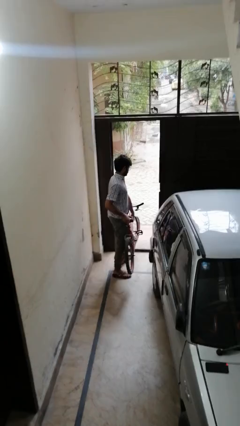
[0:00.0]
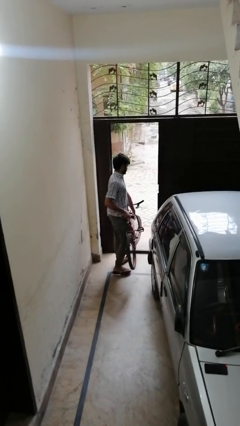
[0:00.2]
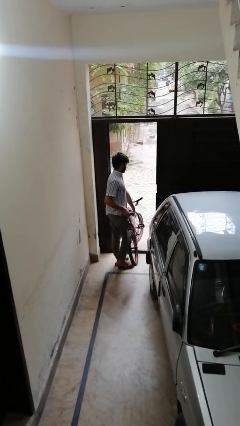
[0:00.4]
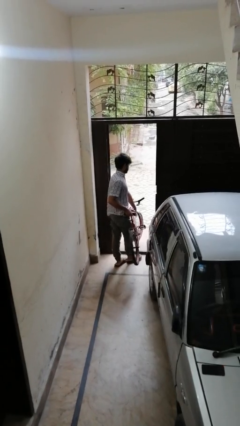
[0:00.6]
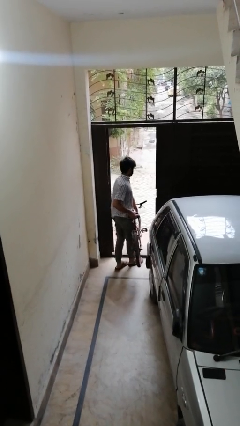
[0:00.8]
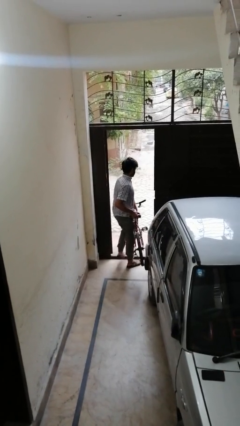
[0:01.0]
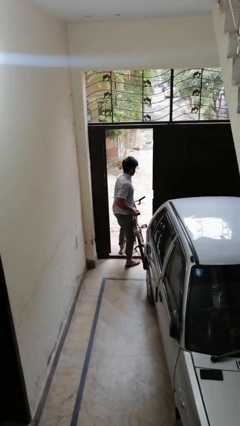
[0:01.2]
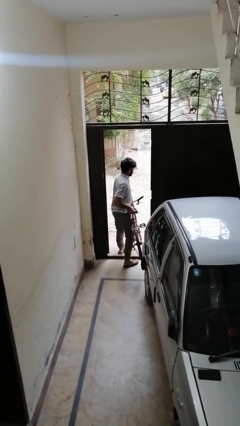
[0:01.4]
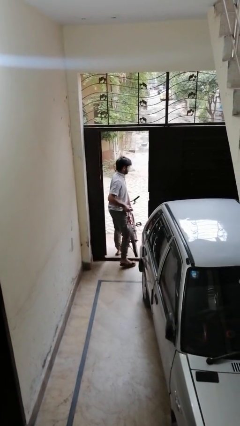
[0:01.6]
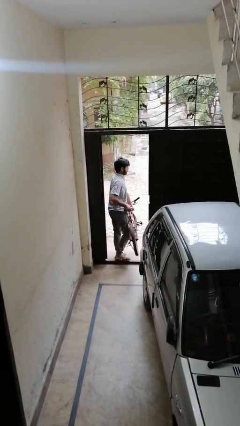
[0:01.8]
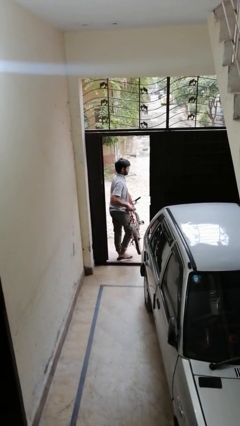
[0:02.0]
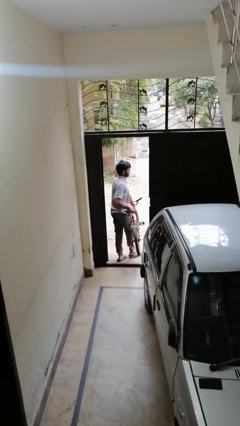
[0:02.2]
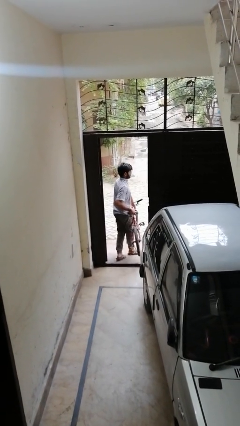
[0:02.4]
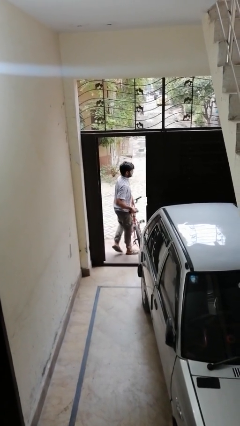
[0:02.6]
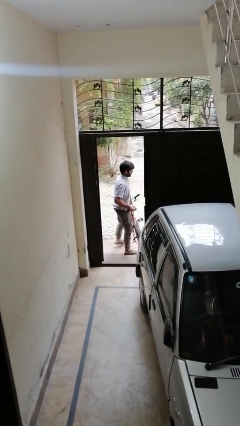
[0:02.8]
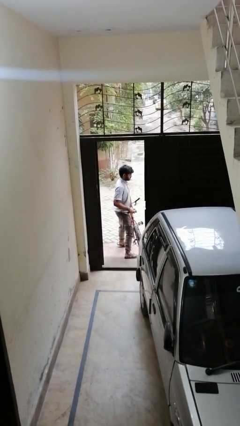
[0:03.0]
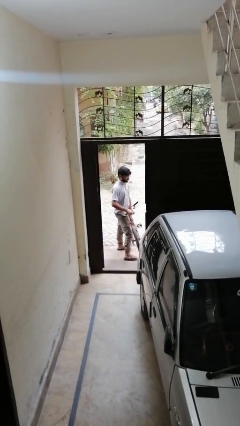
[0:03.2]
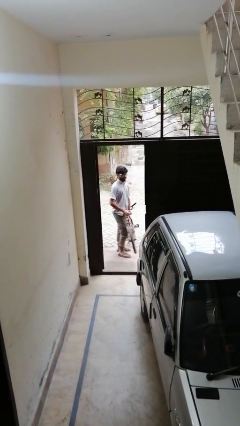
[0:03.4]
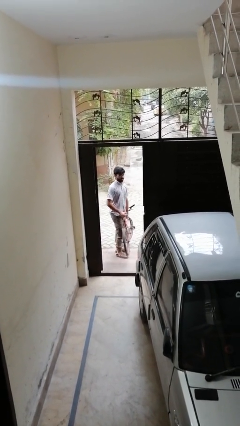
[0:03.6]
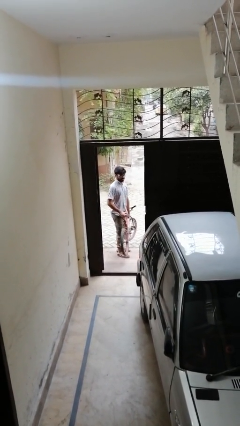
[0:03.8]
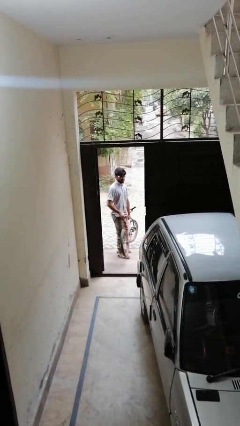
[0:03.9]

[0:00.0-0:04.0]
person carries bicycle

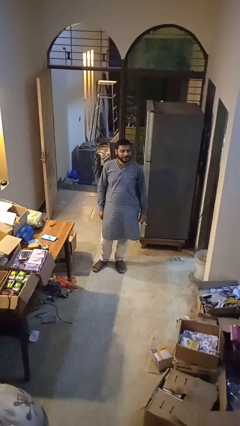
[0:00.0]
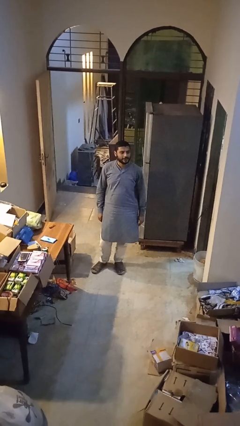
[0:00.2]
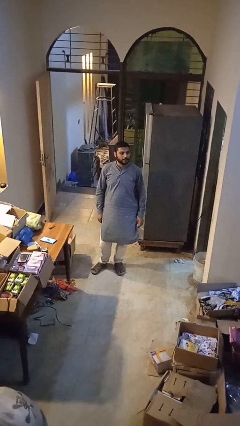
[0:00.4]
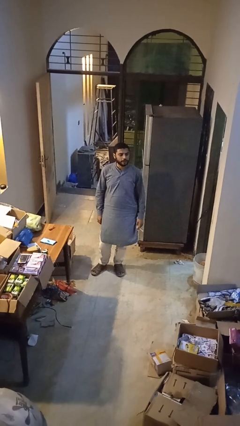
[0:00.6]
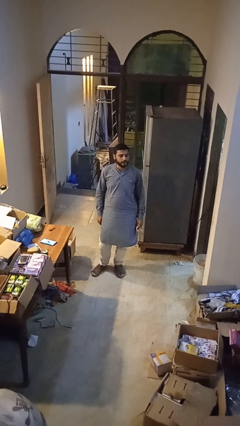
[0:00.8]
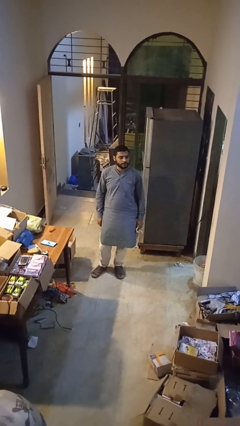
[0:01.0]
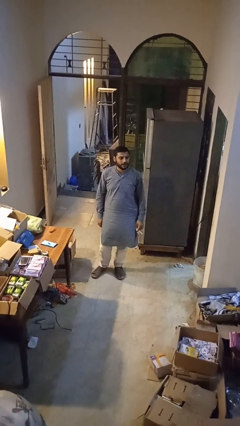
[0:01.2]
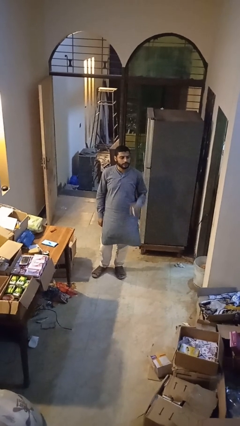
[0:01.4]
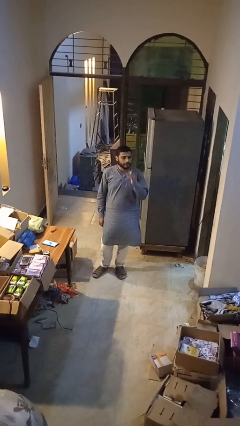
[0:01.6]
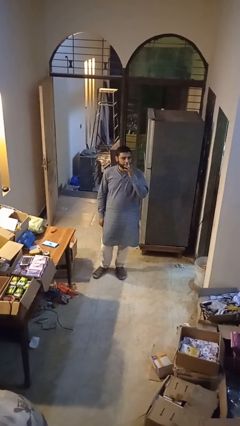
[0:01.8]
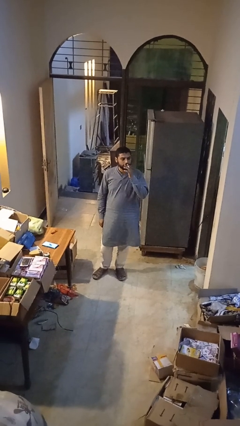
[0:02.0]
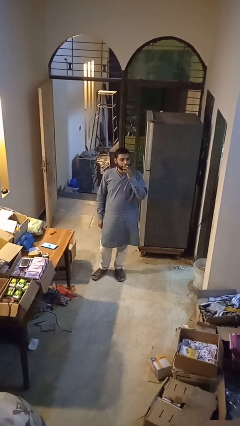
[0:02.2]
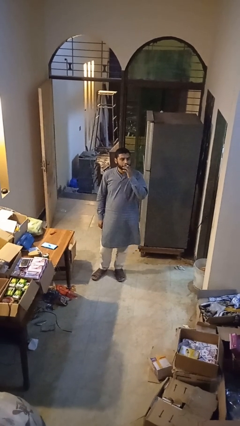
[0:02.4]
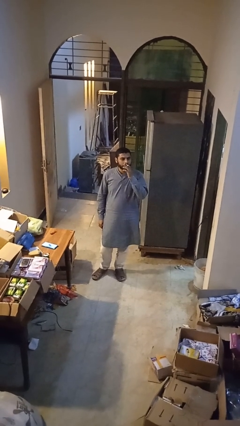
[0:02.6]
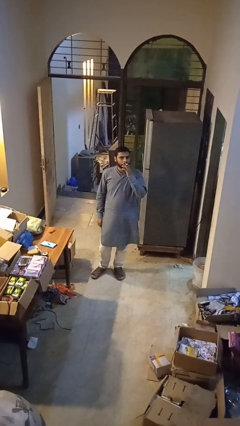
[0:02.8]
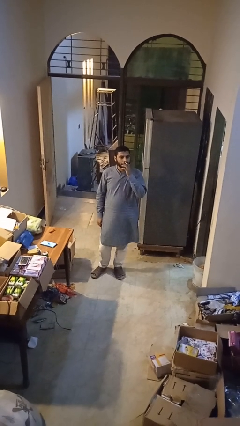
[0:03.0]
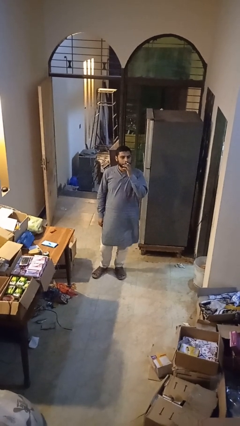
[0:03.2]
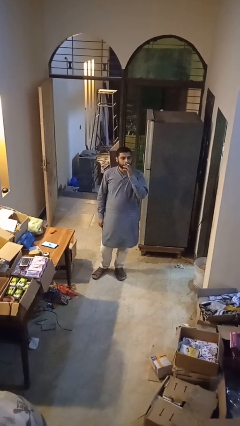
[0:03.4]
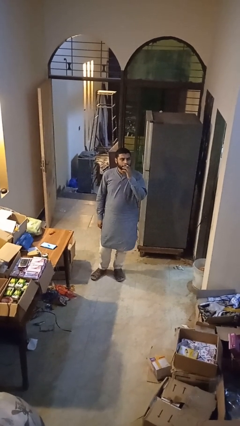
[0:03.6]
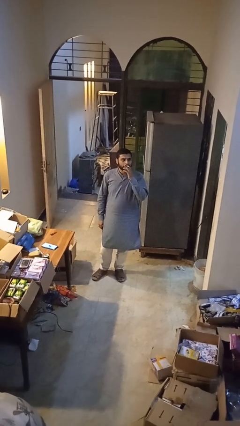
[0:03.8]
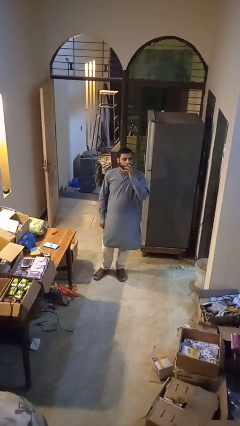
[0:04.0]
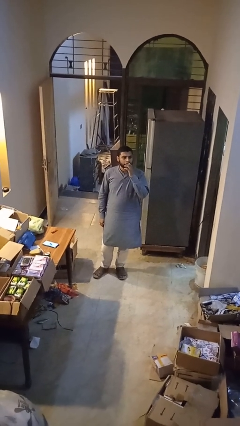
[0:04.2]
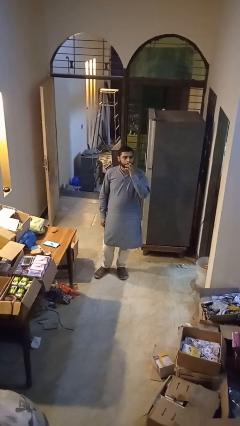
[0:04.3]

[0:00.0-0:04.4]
person vapes

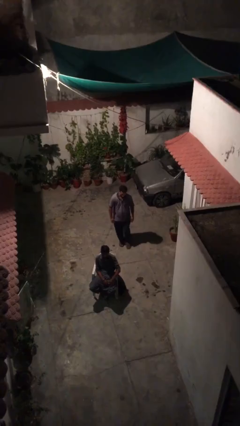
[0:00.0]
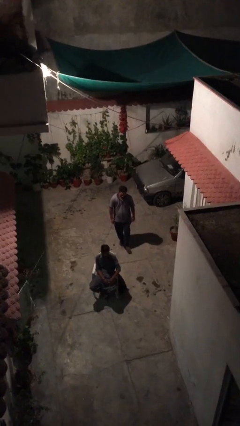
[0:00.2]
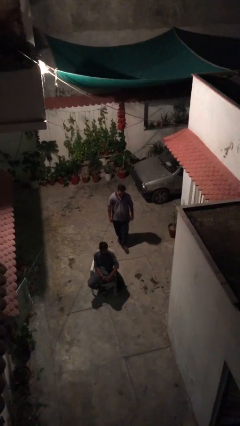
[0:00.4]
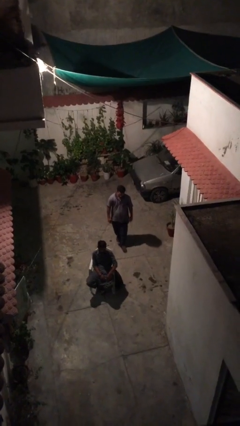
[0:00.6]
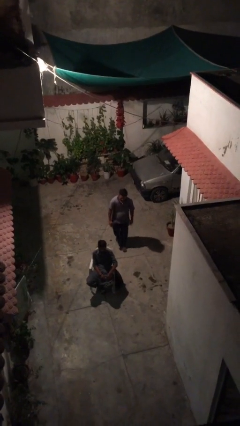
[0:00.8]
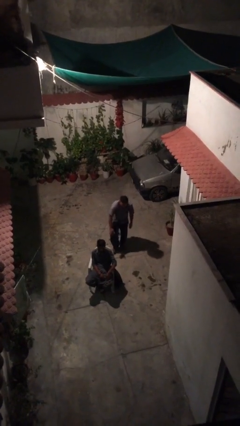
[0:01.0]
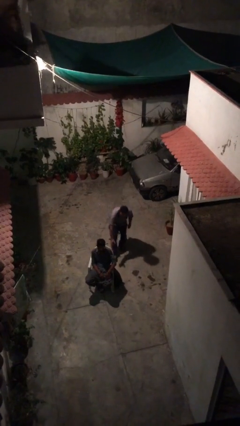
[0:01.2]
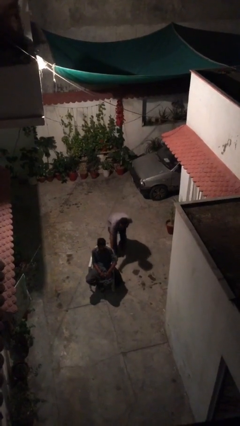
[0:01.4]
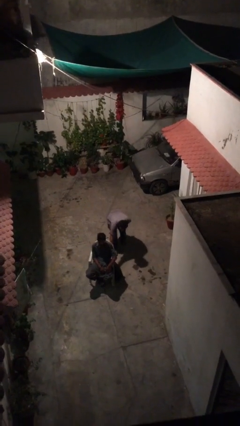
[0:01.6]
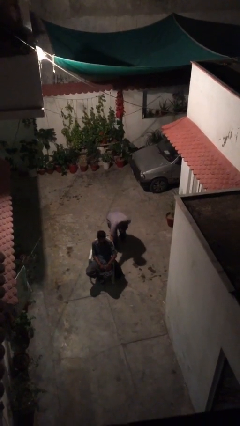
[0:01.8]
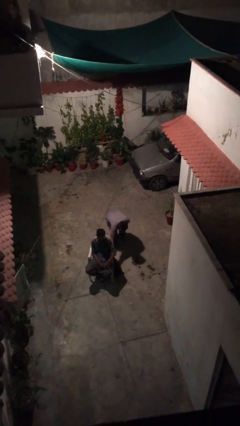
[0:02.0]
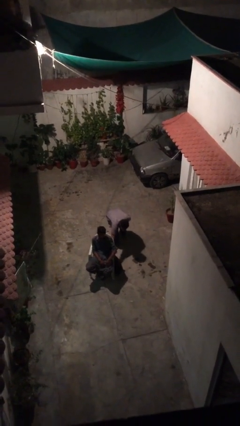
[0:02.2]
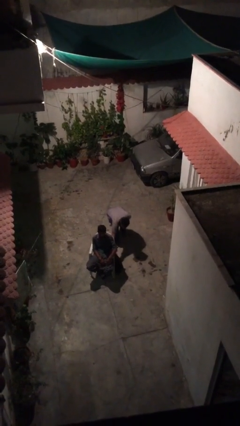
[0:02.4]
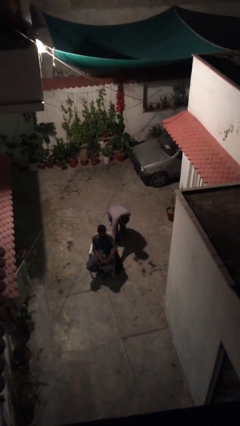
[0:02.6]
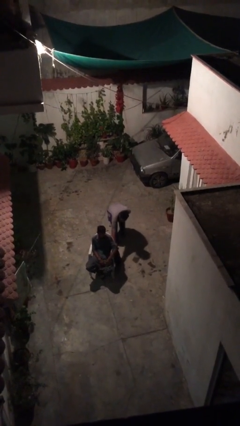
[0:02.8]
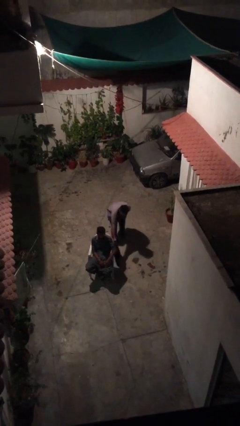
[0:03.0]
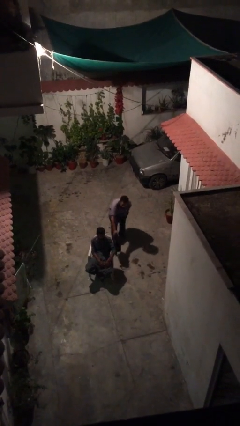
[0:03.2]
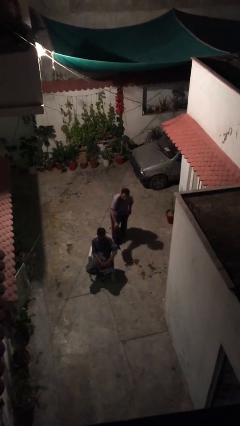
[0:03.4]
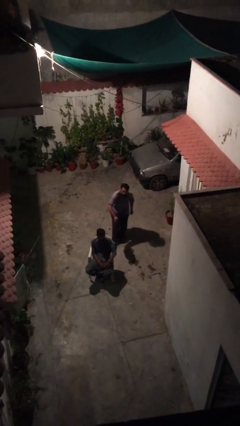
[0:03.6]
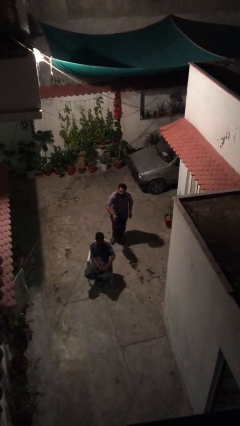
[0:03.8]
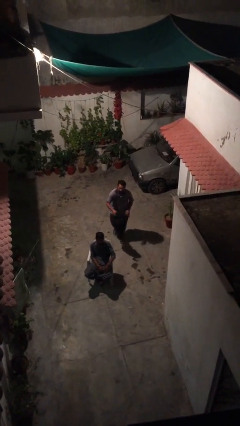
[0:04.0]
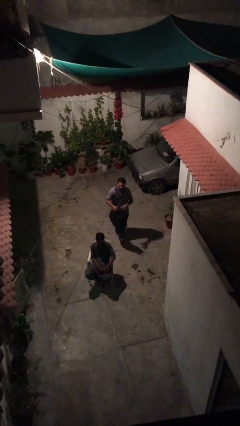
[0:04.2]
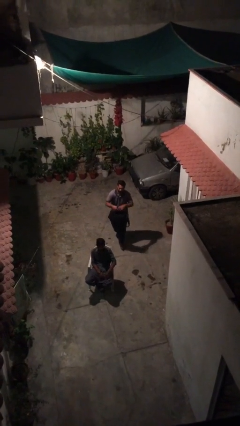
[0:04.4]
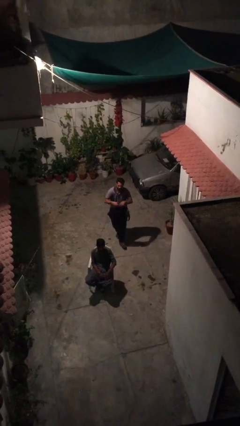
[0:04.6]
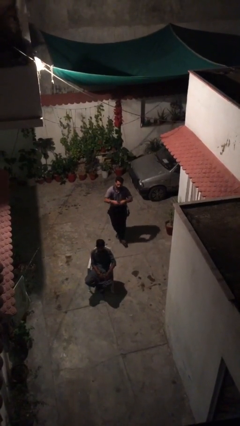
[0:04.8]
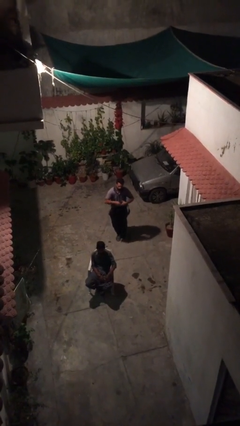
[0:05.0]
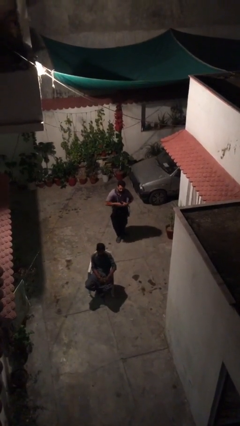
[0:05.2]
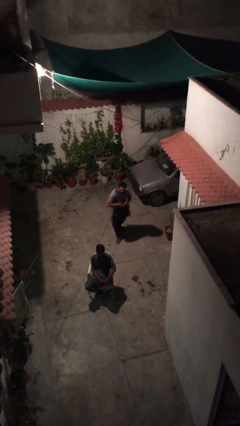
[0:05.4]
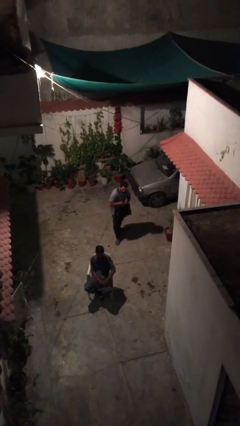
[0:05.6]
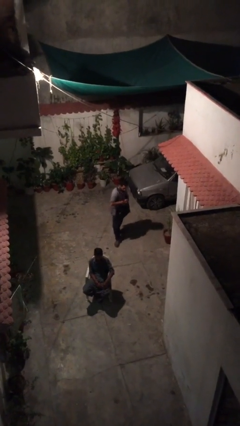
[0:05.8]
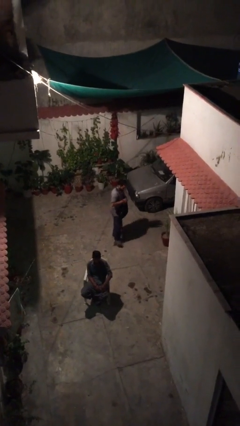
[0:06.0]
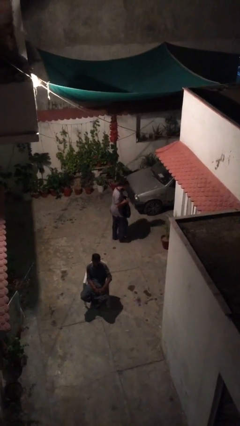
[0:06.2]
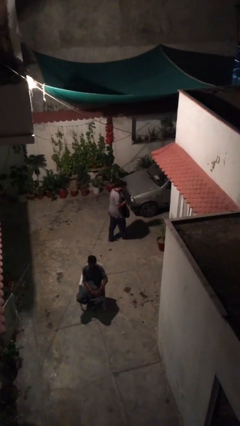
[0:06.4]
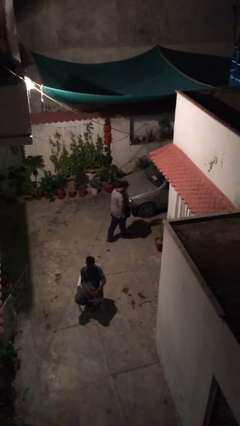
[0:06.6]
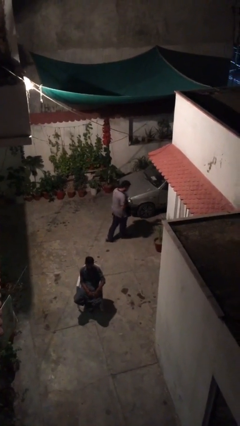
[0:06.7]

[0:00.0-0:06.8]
person steals object from person

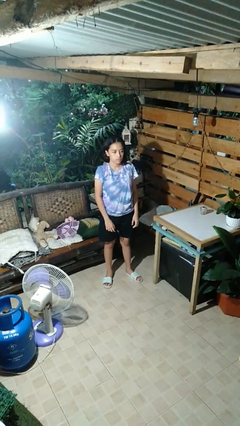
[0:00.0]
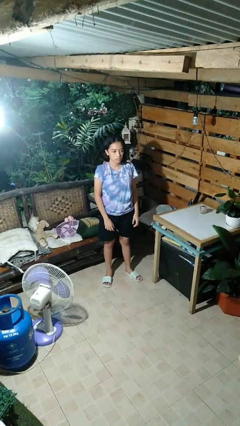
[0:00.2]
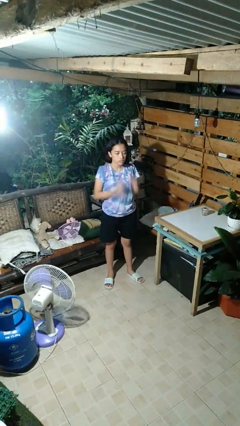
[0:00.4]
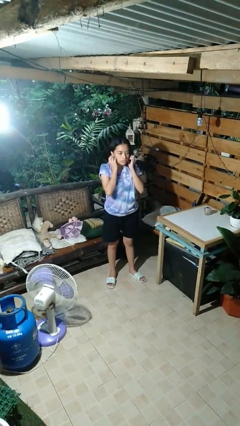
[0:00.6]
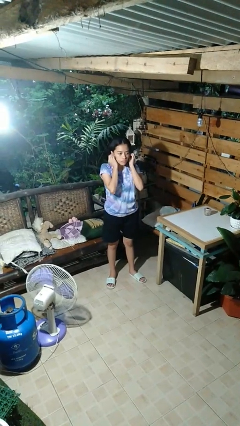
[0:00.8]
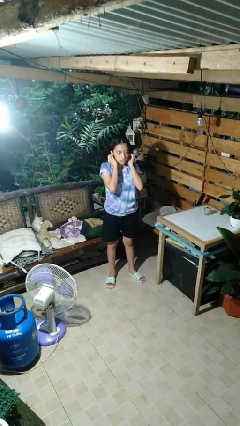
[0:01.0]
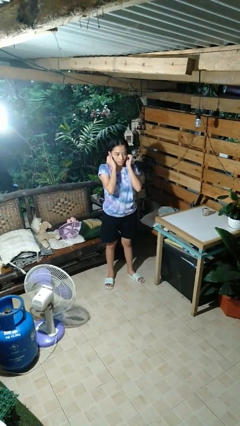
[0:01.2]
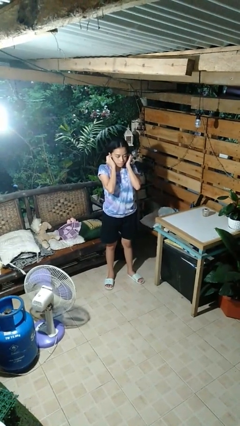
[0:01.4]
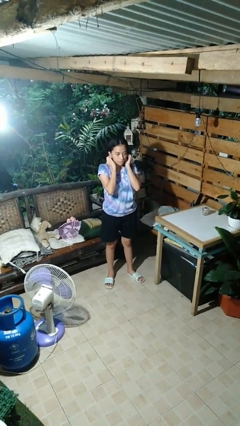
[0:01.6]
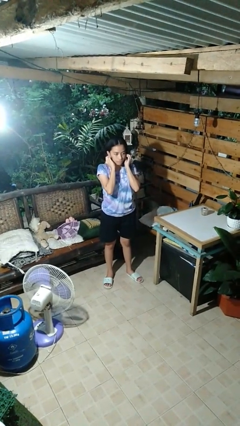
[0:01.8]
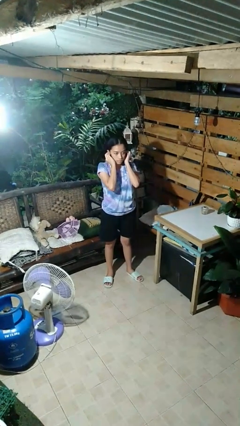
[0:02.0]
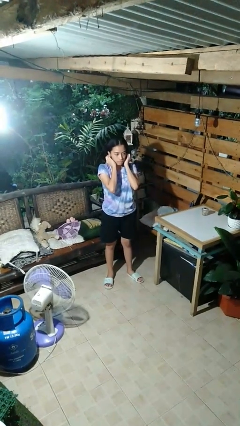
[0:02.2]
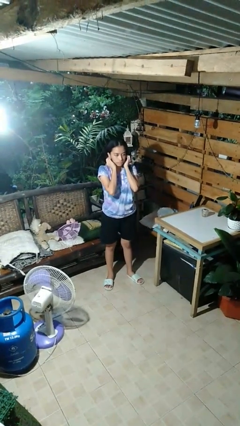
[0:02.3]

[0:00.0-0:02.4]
person touches earlobe

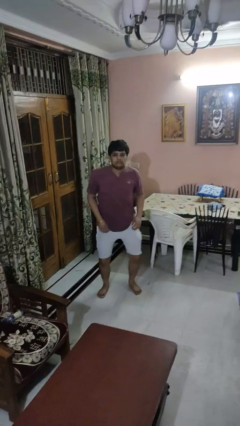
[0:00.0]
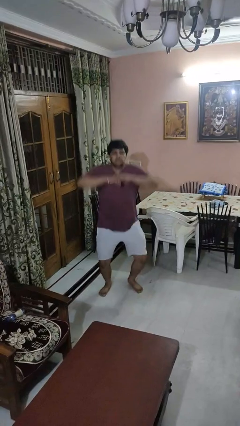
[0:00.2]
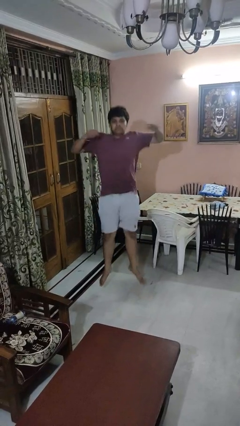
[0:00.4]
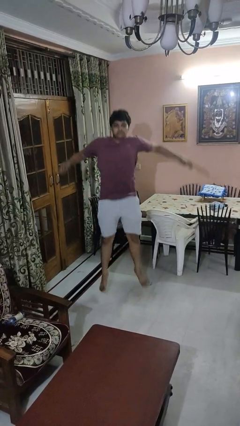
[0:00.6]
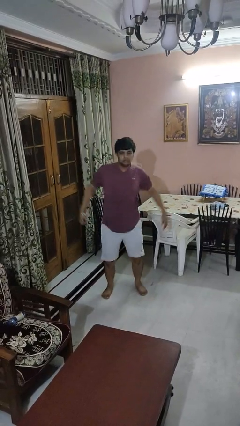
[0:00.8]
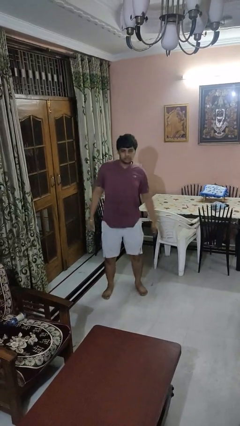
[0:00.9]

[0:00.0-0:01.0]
person jumps
